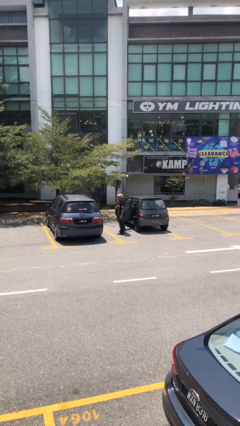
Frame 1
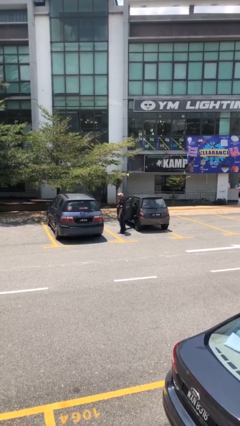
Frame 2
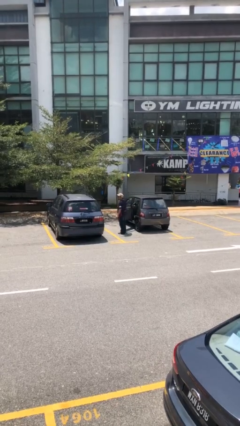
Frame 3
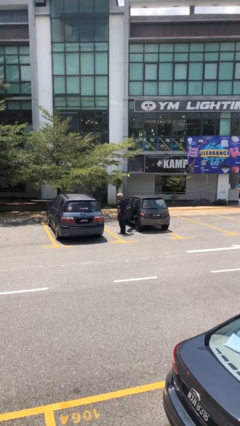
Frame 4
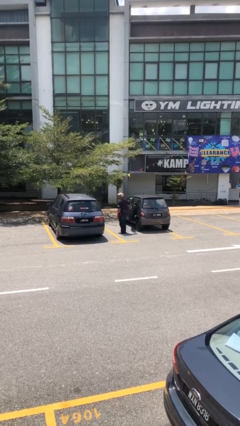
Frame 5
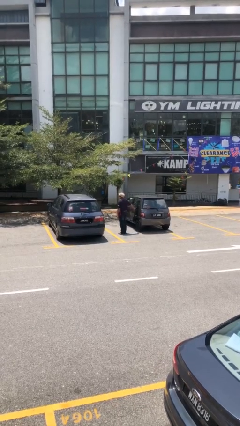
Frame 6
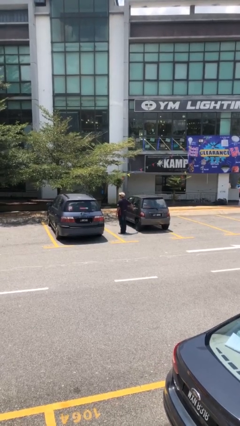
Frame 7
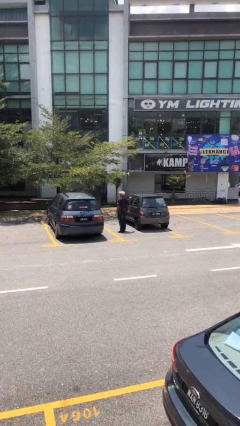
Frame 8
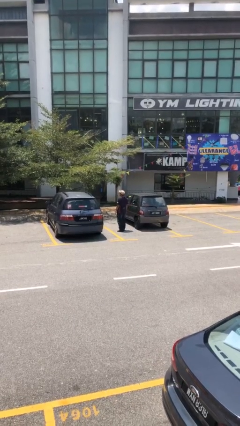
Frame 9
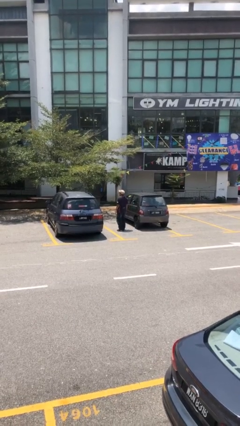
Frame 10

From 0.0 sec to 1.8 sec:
person closes car door

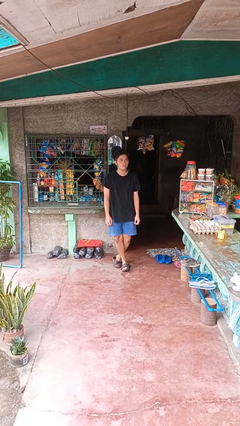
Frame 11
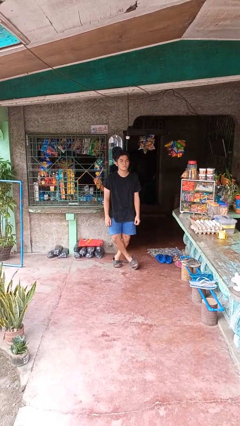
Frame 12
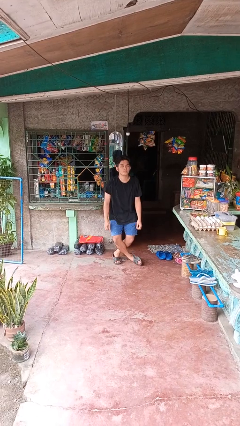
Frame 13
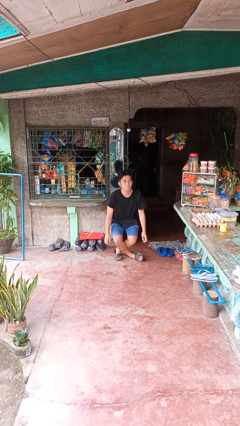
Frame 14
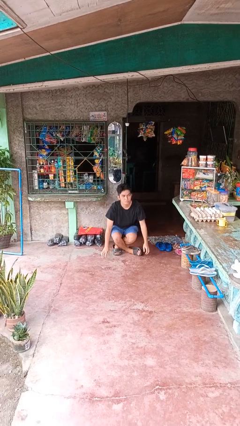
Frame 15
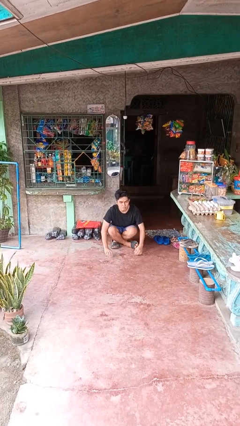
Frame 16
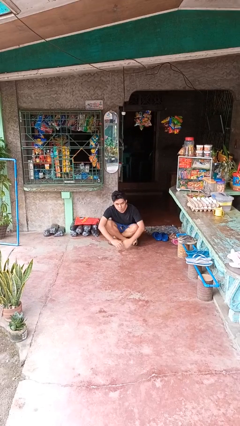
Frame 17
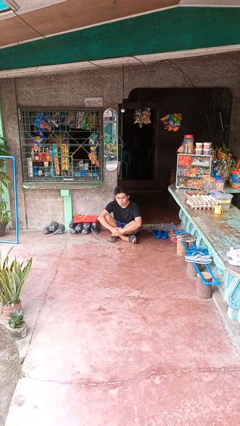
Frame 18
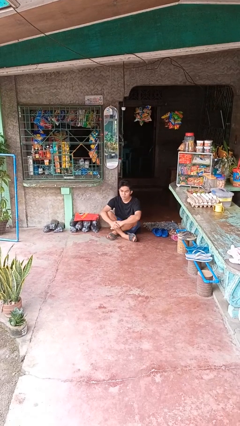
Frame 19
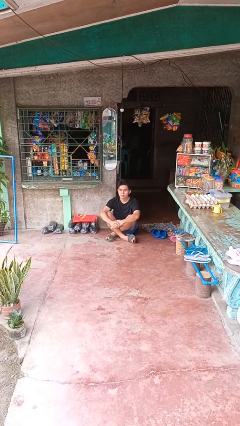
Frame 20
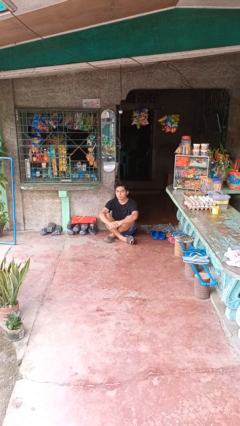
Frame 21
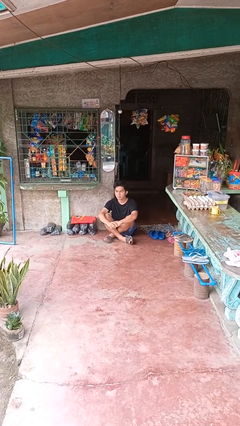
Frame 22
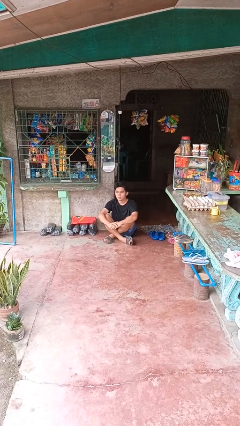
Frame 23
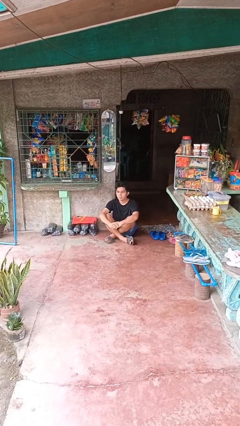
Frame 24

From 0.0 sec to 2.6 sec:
person sits crisscross

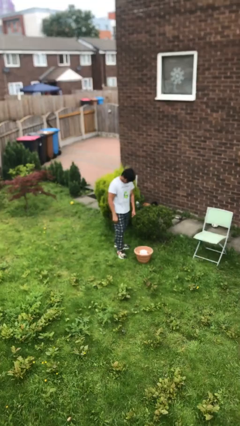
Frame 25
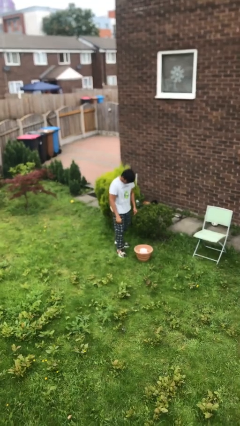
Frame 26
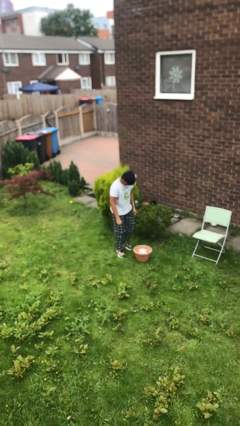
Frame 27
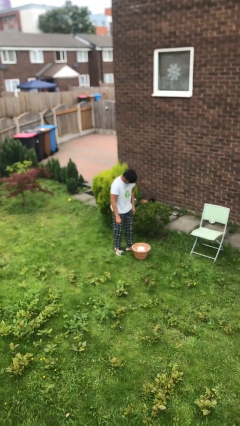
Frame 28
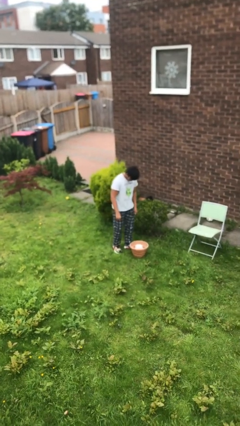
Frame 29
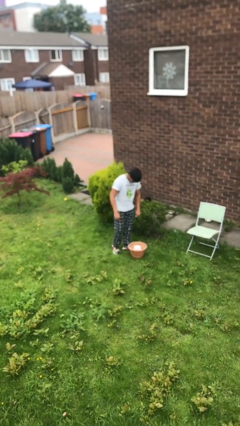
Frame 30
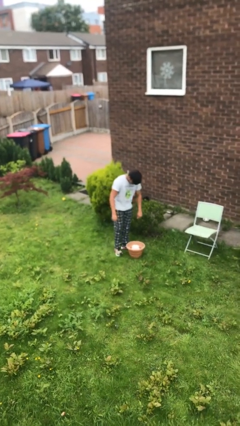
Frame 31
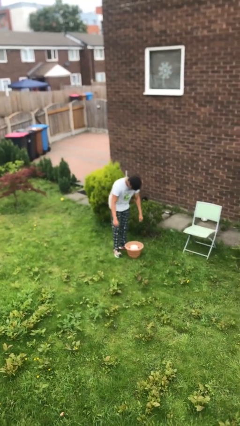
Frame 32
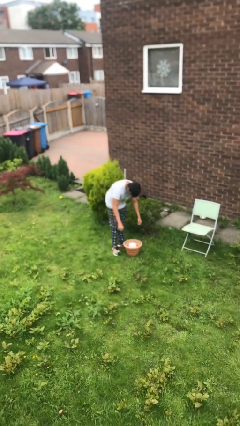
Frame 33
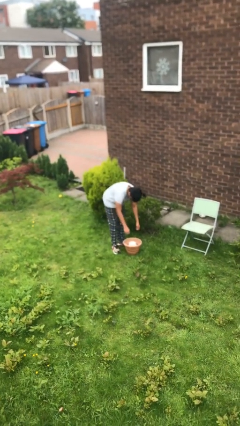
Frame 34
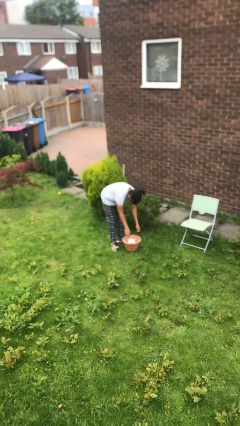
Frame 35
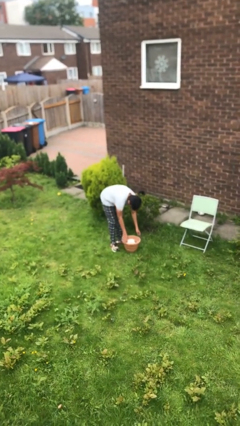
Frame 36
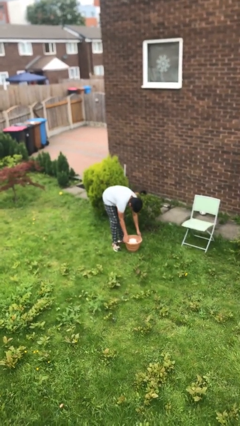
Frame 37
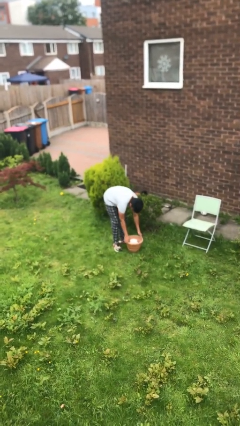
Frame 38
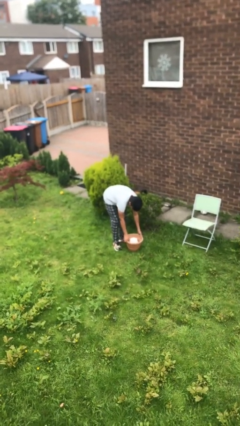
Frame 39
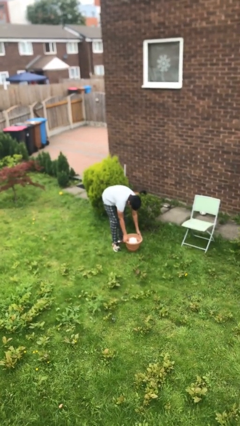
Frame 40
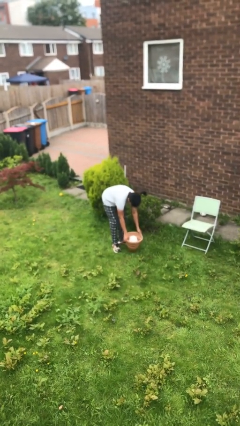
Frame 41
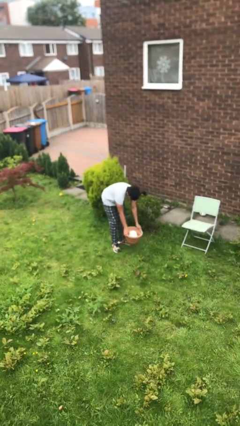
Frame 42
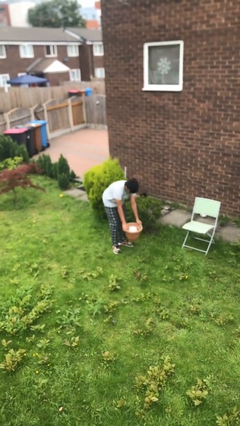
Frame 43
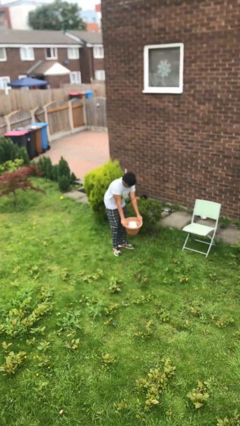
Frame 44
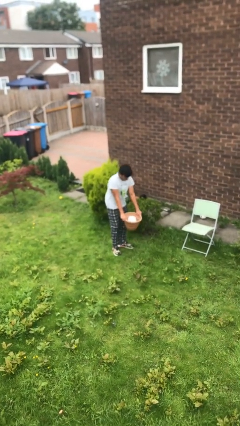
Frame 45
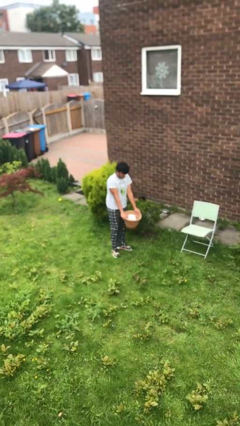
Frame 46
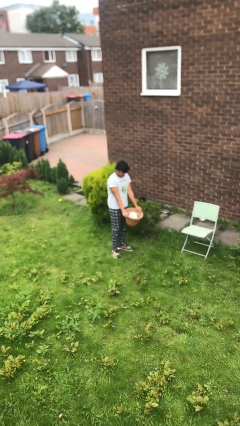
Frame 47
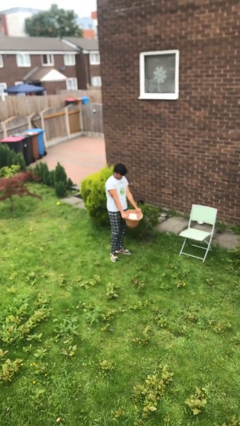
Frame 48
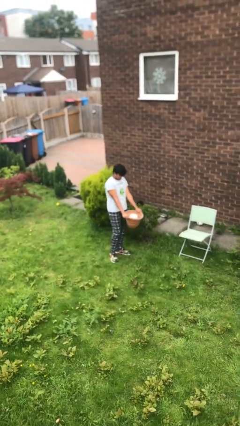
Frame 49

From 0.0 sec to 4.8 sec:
person picks up object from floor

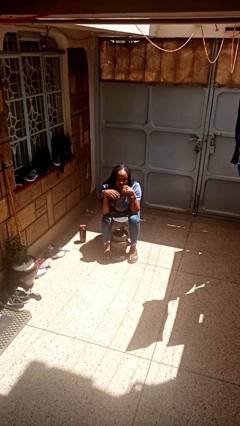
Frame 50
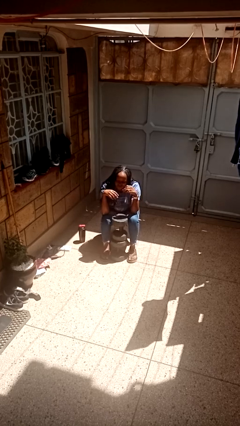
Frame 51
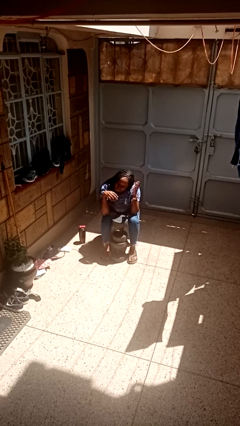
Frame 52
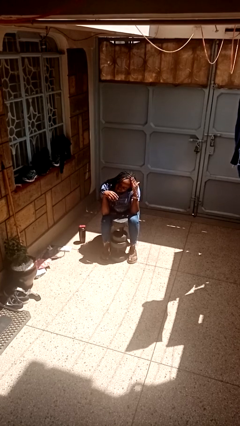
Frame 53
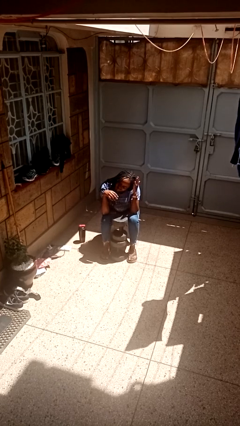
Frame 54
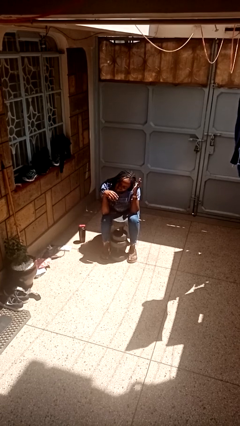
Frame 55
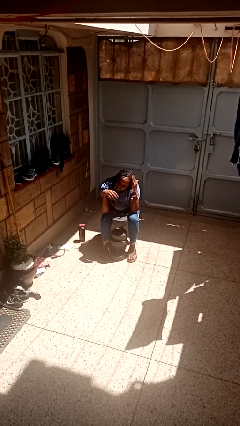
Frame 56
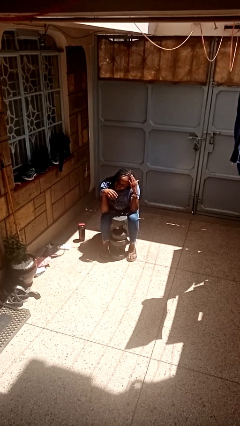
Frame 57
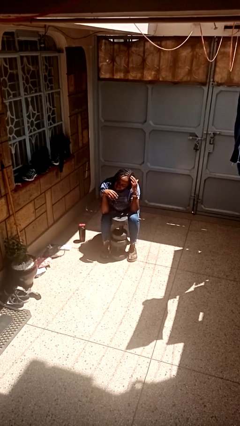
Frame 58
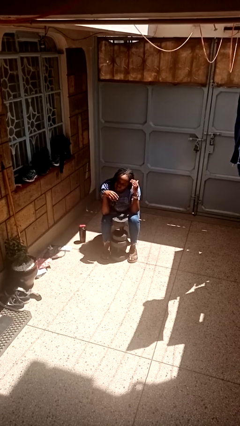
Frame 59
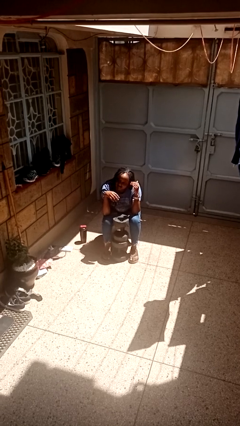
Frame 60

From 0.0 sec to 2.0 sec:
person pats head

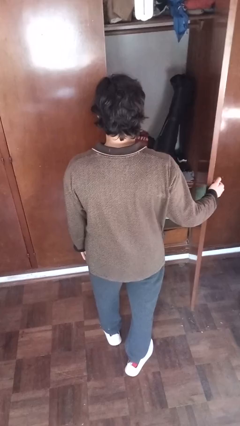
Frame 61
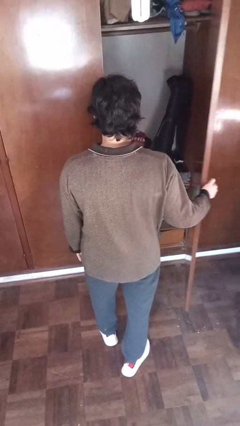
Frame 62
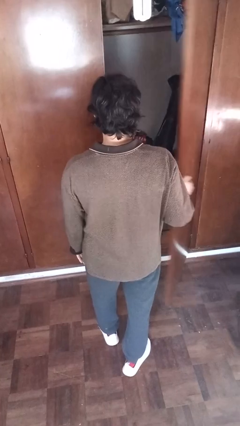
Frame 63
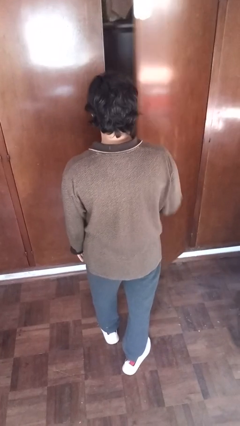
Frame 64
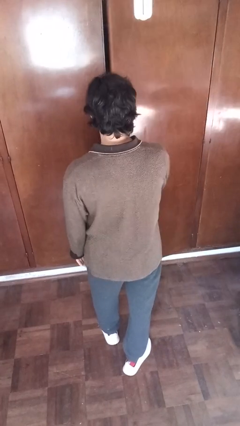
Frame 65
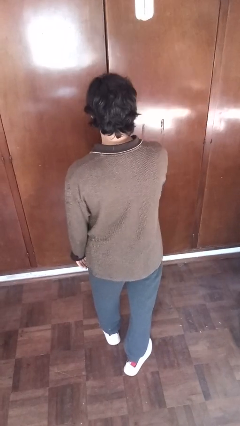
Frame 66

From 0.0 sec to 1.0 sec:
person closes closet door

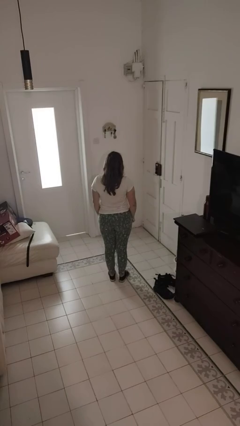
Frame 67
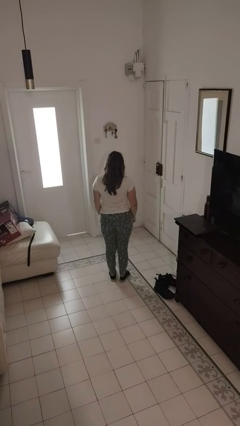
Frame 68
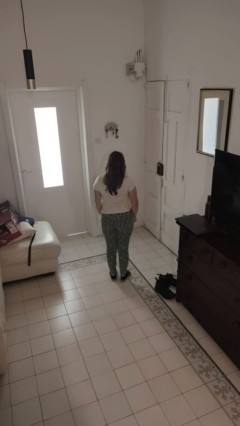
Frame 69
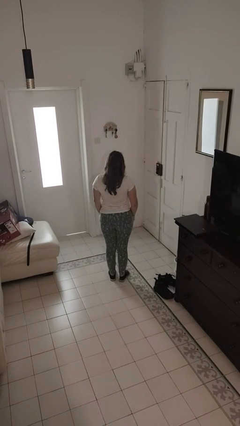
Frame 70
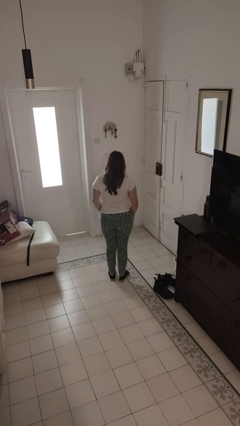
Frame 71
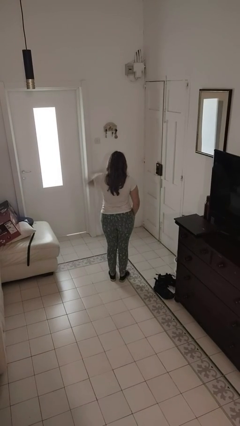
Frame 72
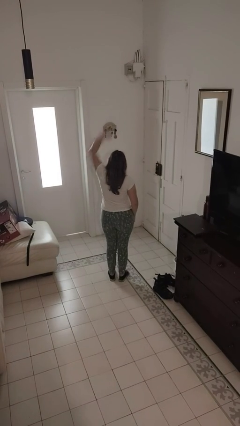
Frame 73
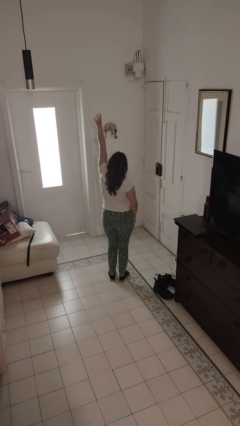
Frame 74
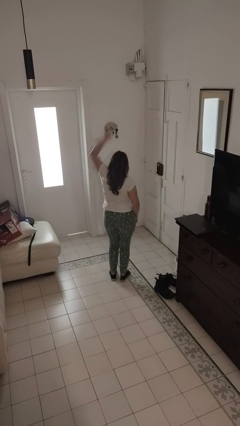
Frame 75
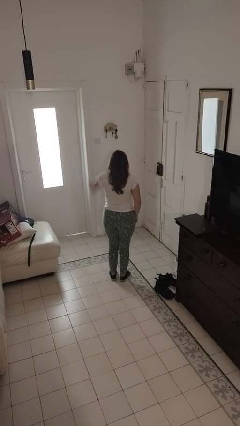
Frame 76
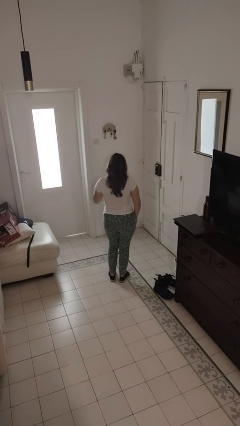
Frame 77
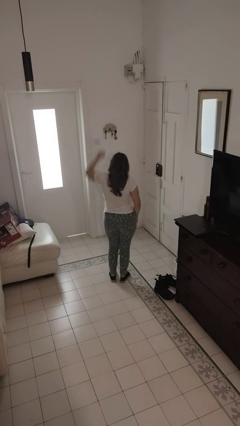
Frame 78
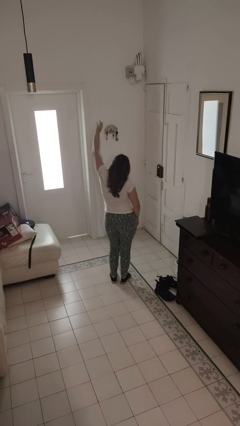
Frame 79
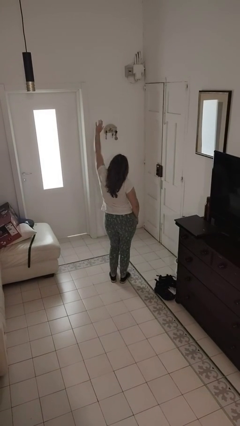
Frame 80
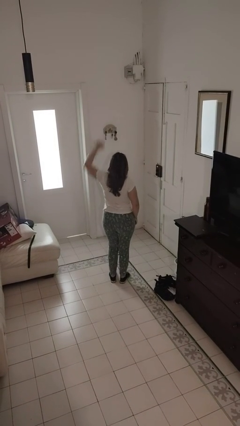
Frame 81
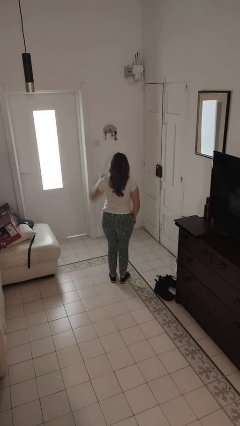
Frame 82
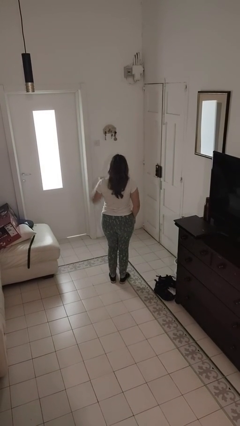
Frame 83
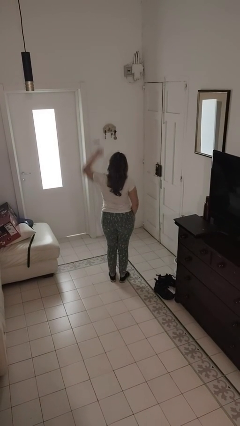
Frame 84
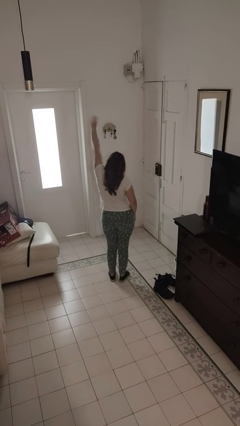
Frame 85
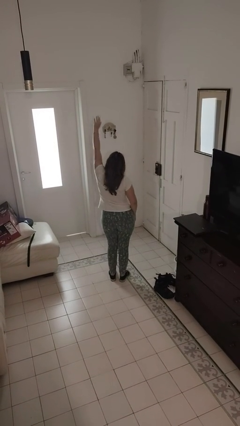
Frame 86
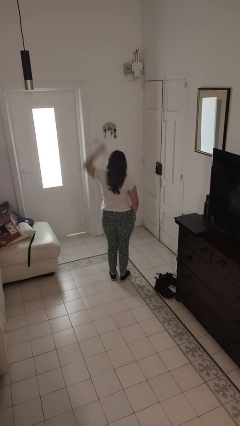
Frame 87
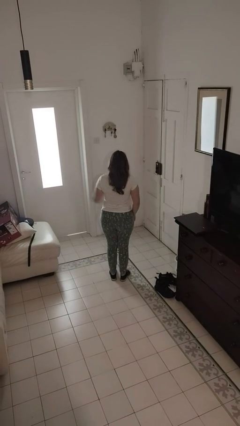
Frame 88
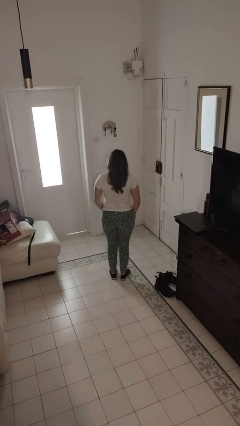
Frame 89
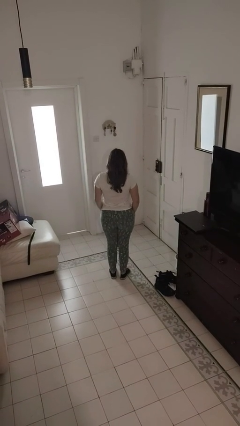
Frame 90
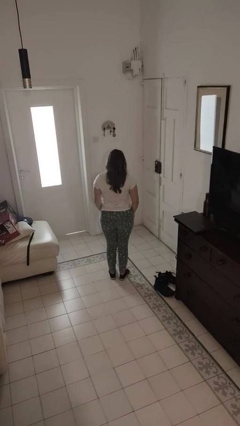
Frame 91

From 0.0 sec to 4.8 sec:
person dances in place

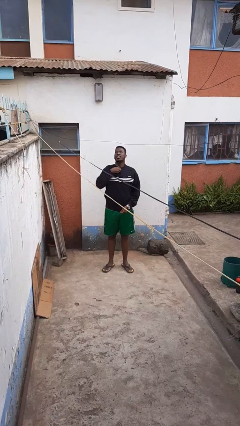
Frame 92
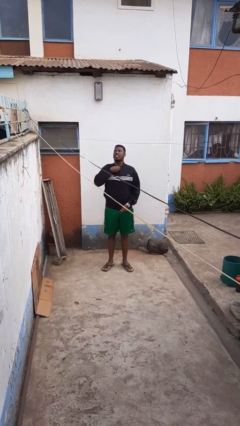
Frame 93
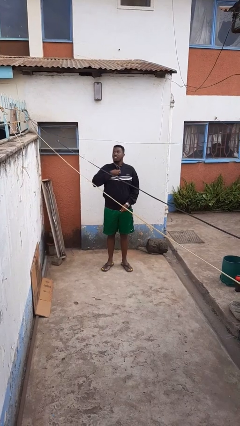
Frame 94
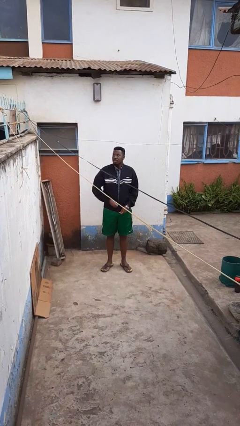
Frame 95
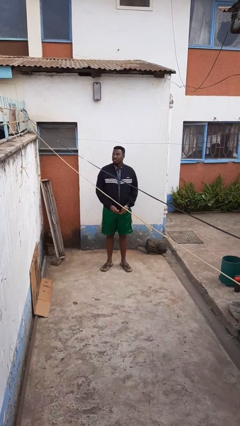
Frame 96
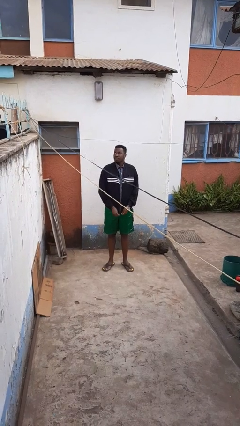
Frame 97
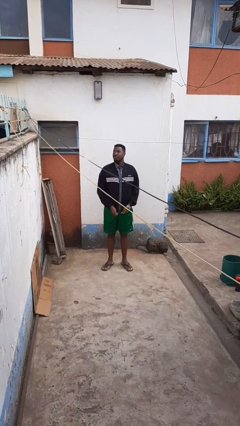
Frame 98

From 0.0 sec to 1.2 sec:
person unzips jacket
